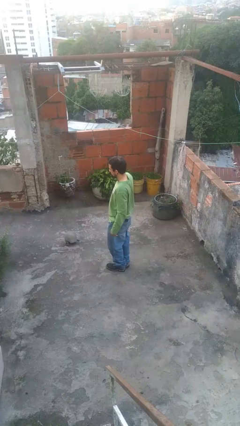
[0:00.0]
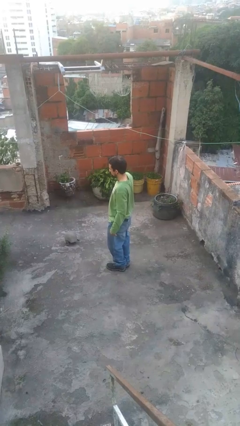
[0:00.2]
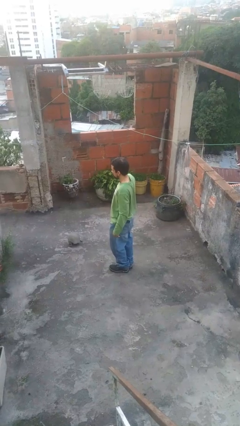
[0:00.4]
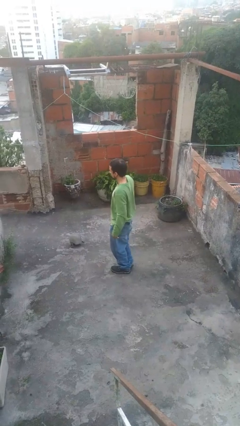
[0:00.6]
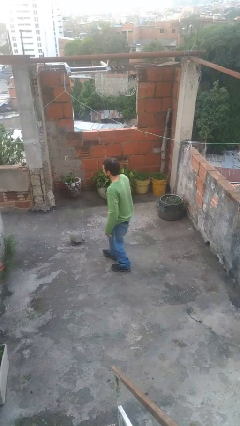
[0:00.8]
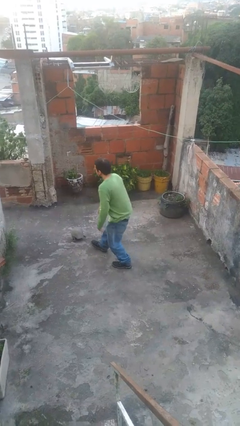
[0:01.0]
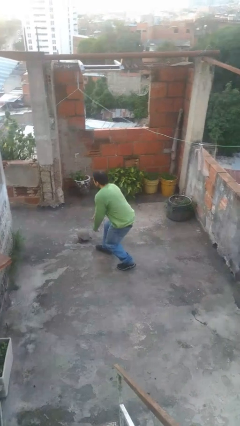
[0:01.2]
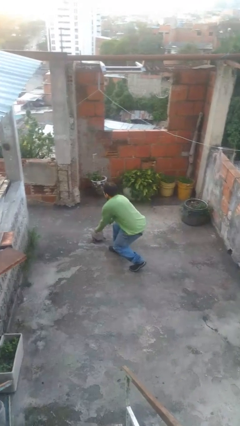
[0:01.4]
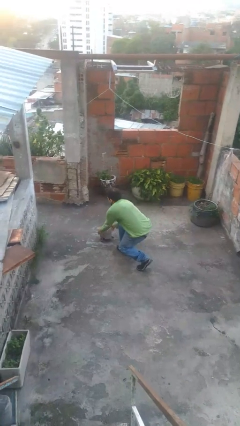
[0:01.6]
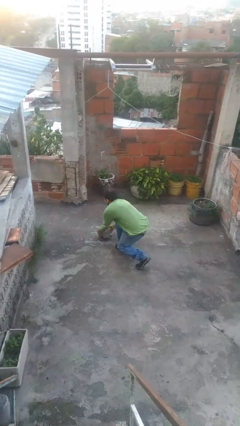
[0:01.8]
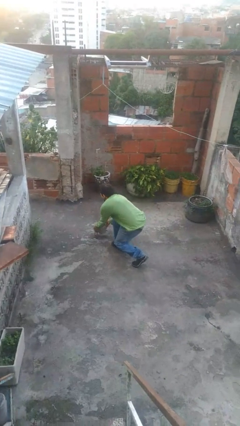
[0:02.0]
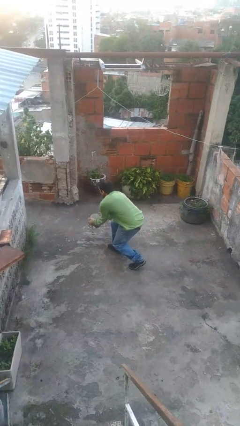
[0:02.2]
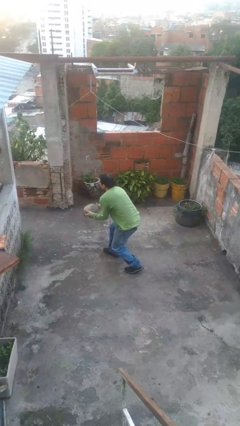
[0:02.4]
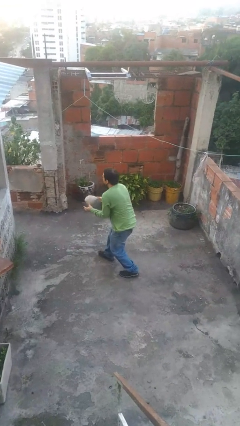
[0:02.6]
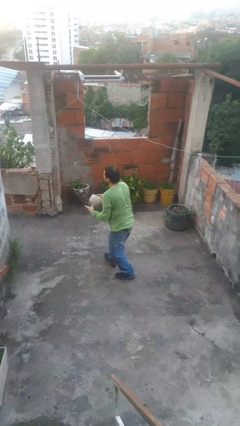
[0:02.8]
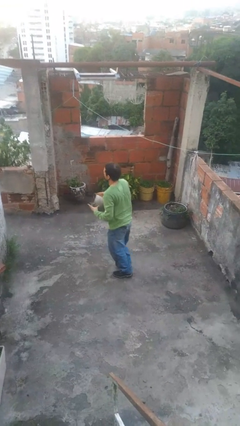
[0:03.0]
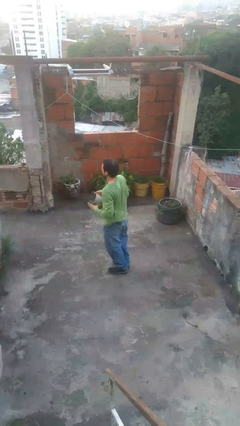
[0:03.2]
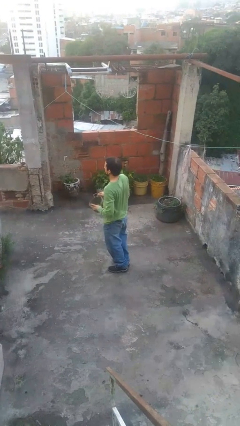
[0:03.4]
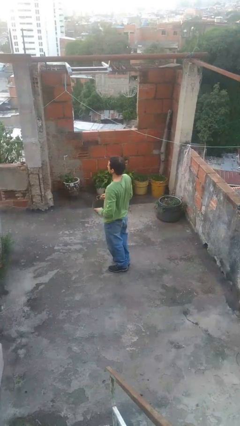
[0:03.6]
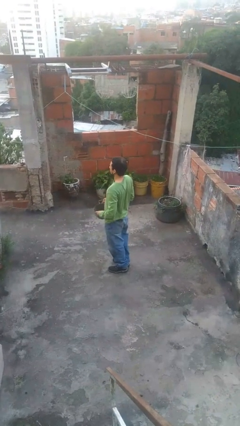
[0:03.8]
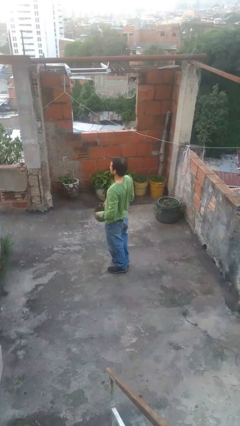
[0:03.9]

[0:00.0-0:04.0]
person picks up object from floor

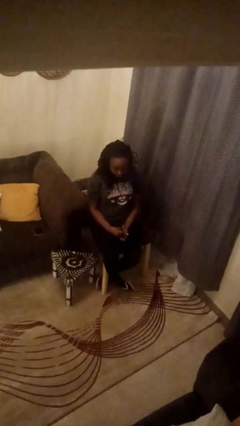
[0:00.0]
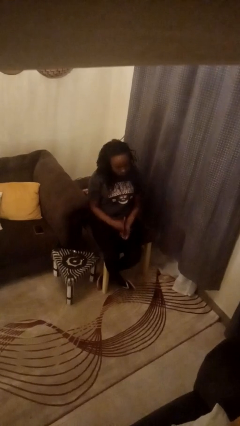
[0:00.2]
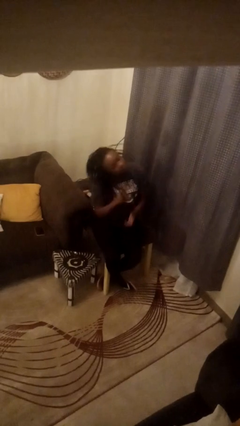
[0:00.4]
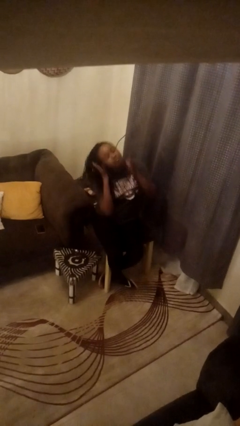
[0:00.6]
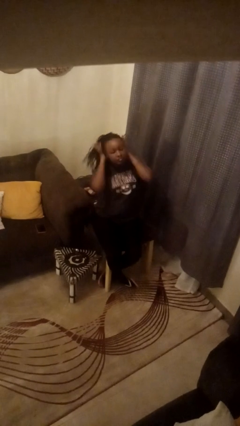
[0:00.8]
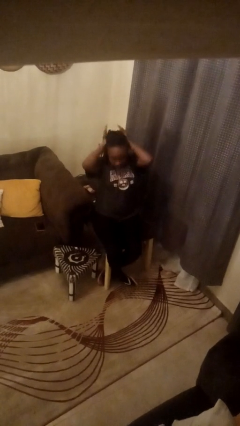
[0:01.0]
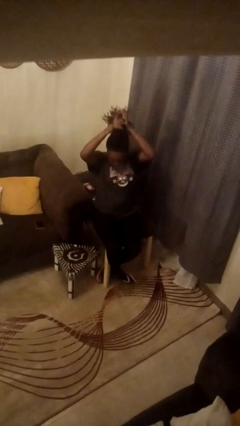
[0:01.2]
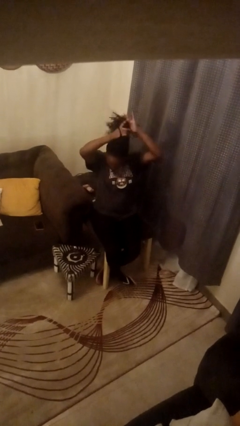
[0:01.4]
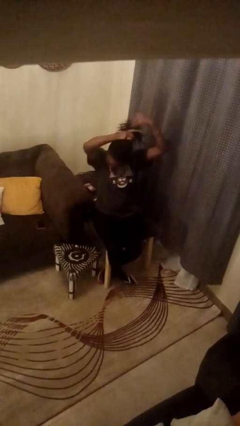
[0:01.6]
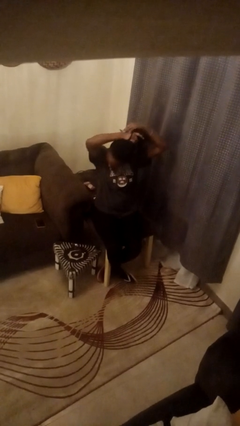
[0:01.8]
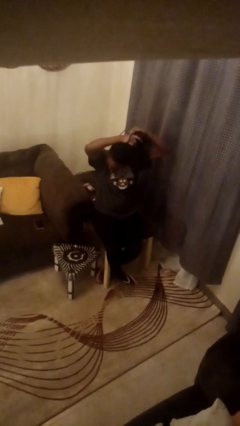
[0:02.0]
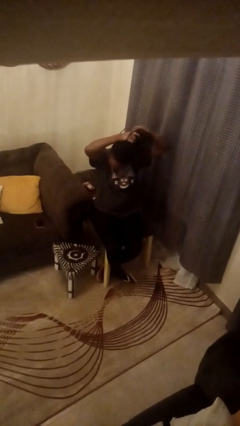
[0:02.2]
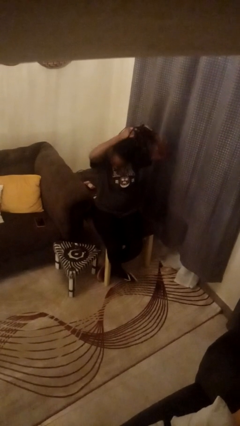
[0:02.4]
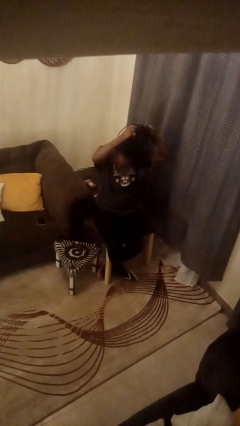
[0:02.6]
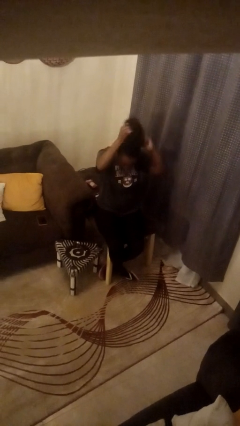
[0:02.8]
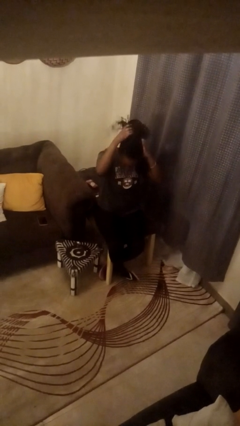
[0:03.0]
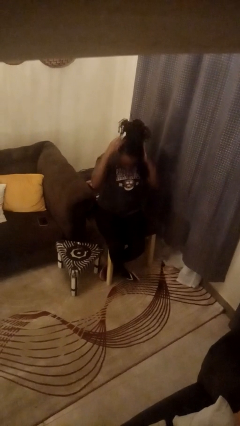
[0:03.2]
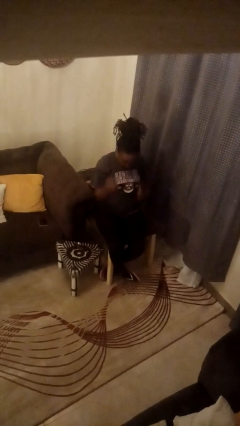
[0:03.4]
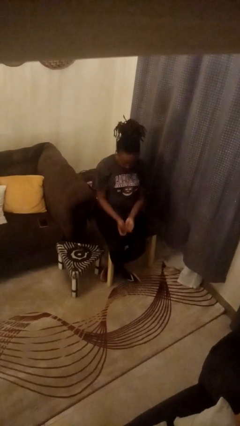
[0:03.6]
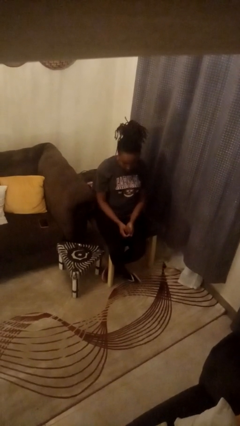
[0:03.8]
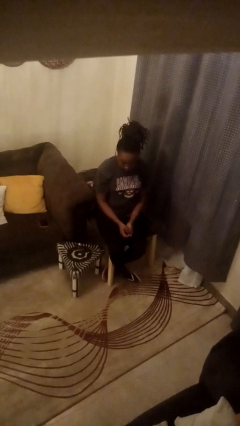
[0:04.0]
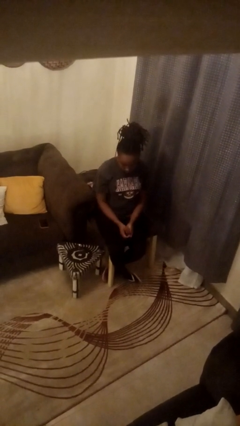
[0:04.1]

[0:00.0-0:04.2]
person puts hair in ponytail

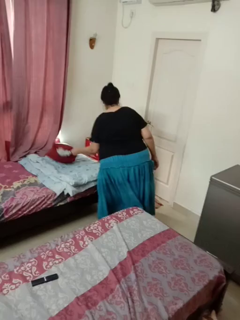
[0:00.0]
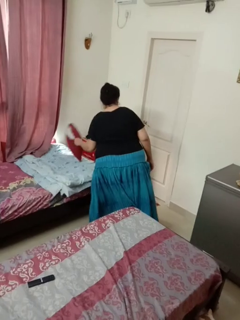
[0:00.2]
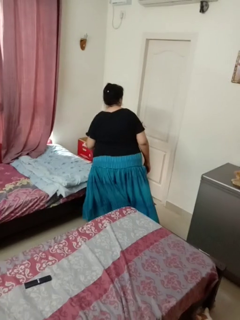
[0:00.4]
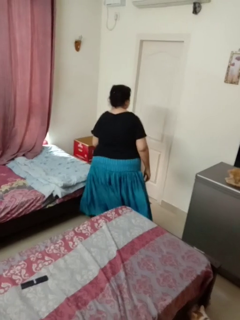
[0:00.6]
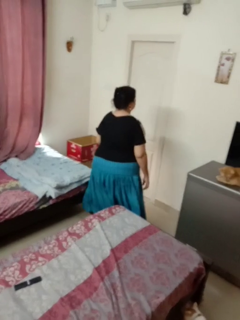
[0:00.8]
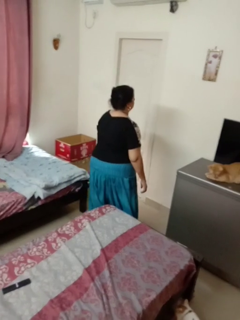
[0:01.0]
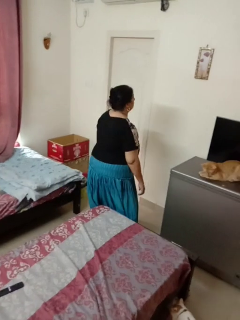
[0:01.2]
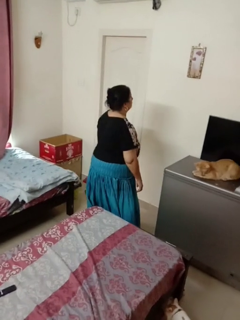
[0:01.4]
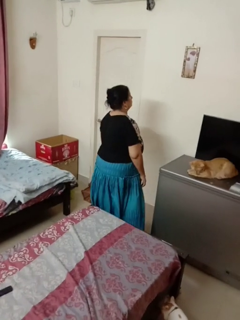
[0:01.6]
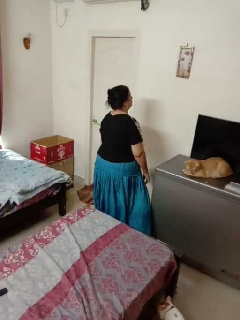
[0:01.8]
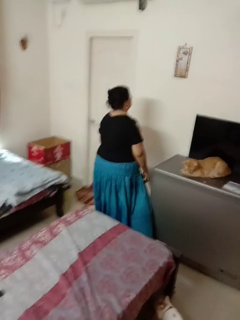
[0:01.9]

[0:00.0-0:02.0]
person picks up object from bed

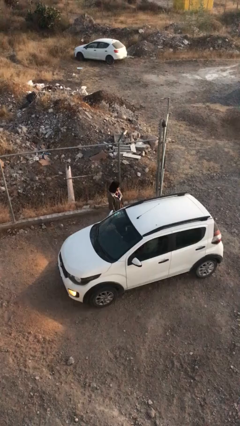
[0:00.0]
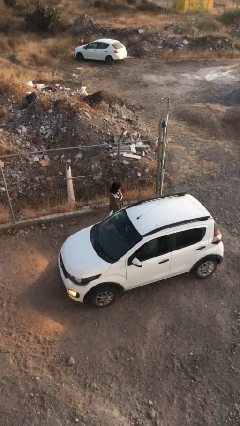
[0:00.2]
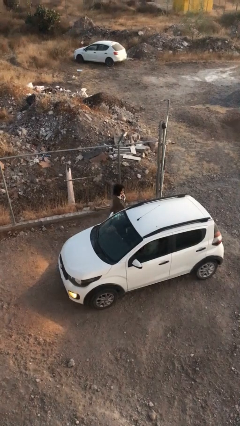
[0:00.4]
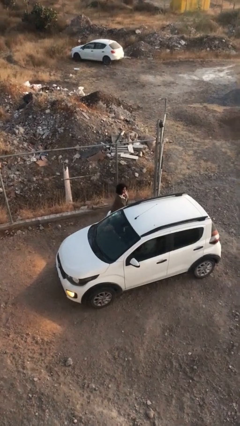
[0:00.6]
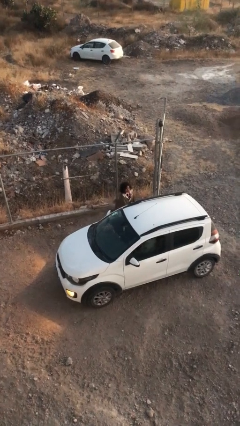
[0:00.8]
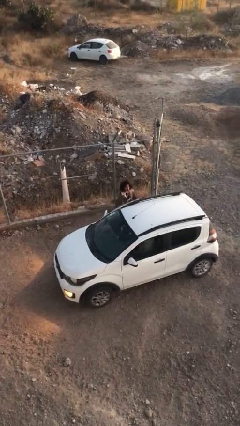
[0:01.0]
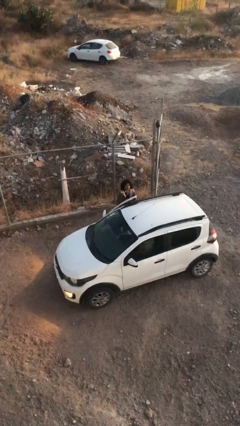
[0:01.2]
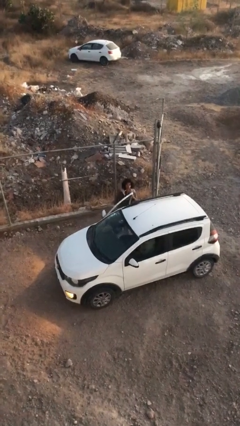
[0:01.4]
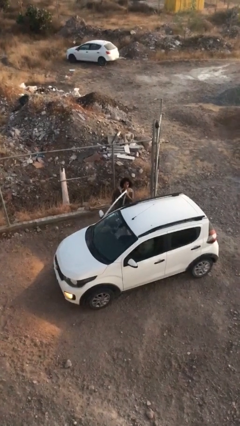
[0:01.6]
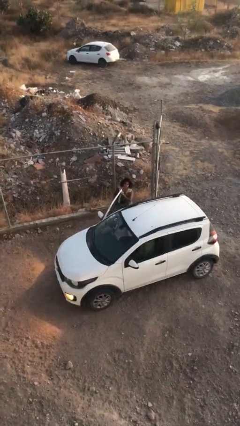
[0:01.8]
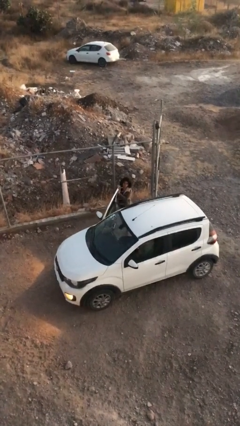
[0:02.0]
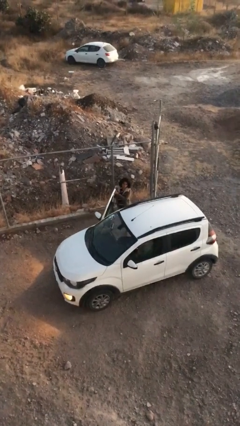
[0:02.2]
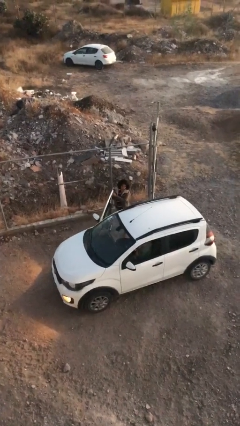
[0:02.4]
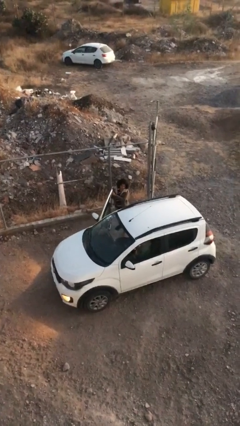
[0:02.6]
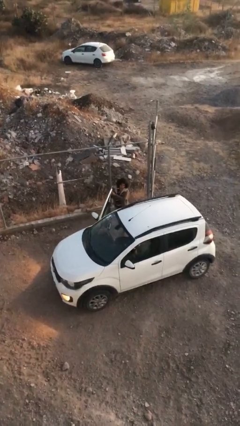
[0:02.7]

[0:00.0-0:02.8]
person opens car door

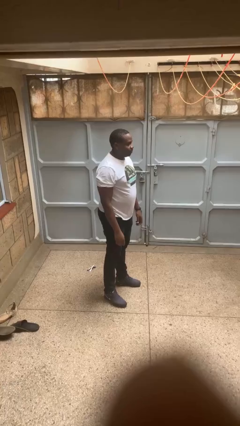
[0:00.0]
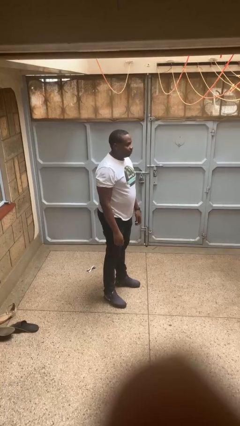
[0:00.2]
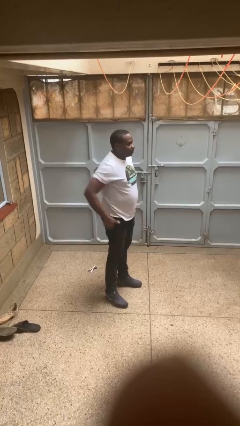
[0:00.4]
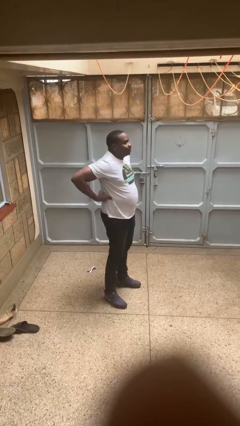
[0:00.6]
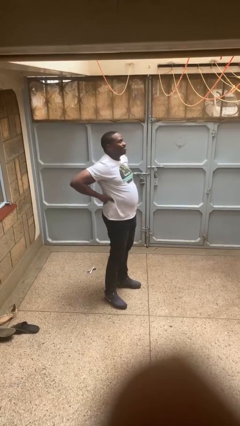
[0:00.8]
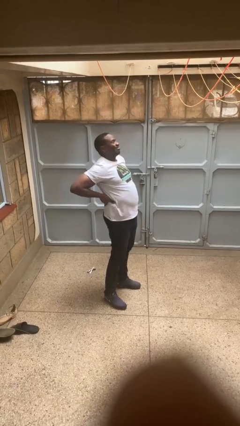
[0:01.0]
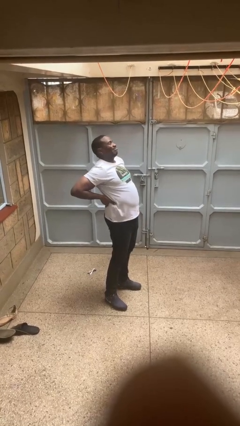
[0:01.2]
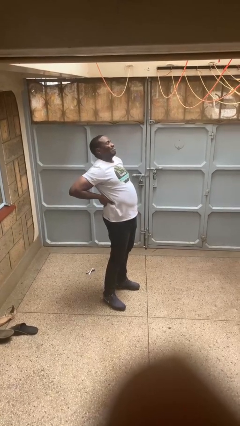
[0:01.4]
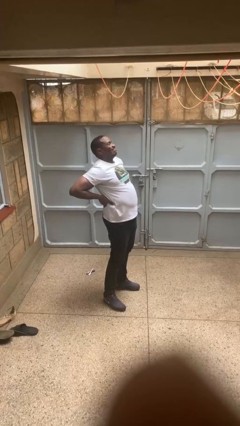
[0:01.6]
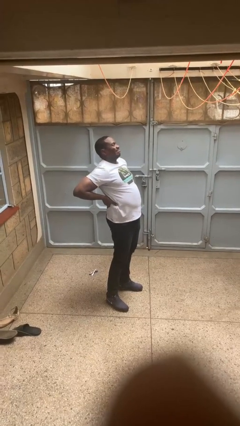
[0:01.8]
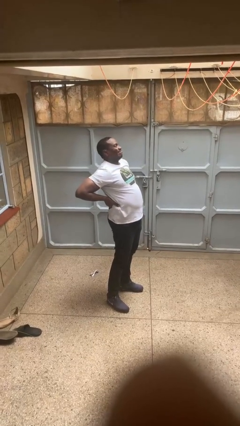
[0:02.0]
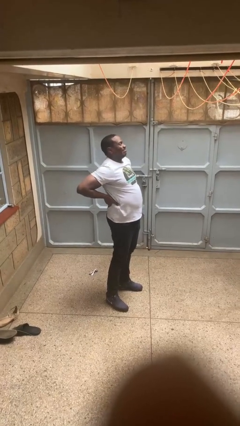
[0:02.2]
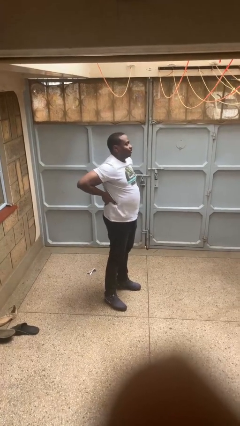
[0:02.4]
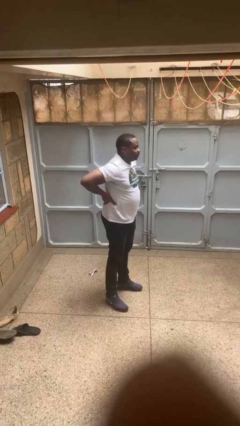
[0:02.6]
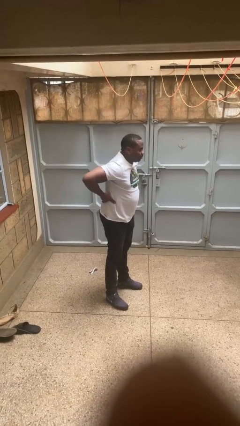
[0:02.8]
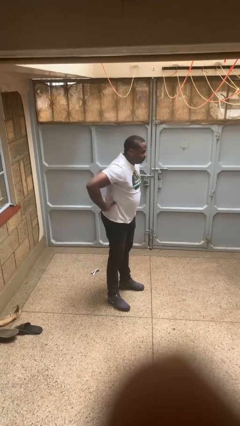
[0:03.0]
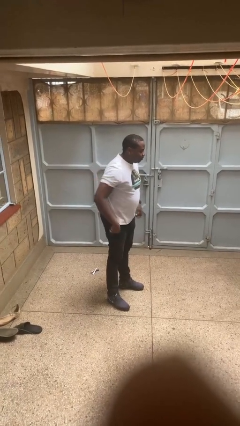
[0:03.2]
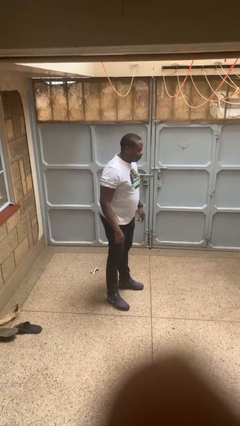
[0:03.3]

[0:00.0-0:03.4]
person stretches back

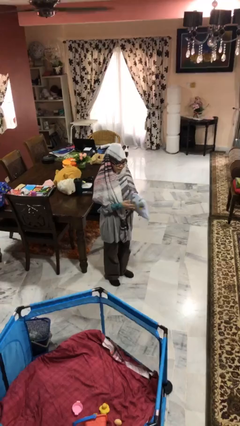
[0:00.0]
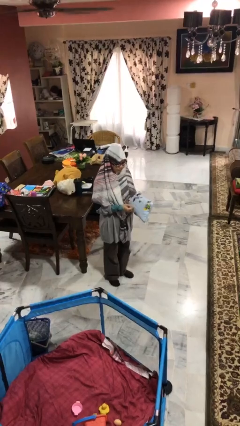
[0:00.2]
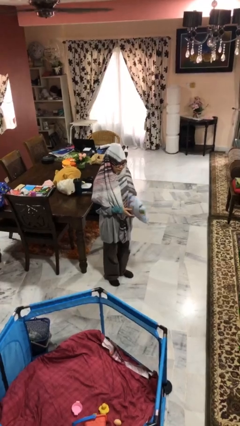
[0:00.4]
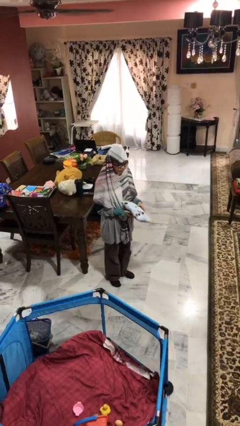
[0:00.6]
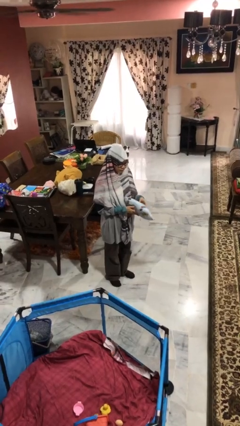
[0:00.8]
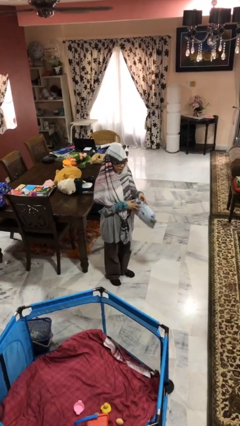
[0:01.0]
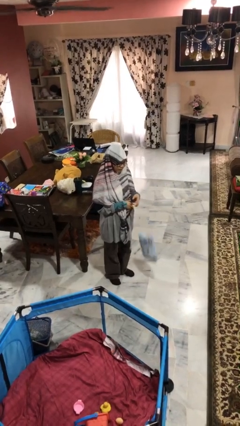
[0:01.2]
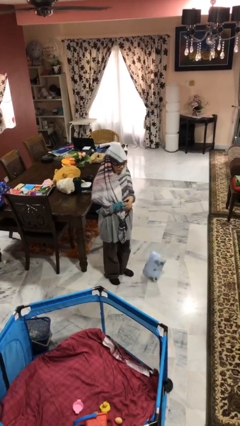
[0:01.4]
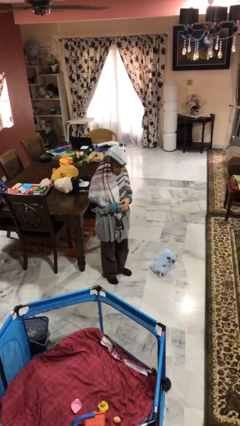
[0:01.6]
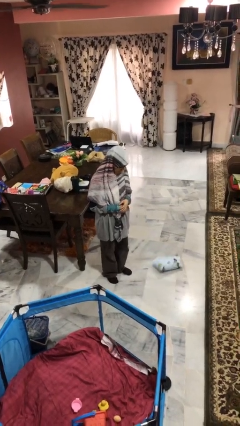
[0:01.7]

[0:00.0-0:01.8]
person drops object
